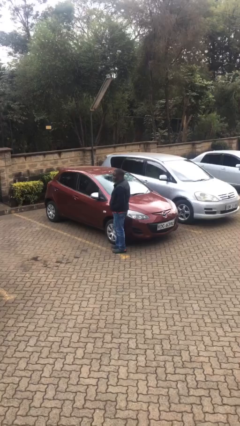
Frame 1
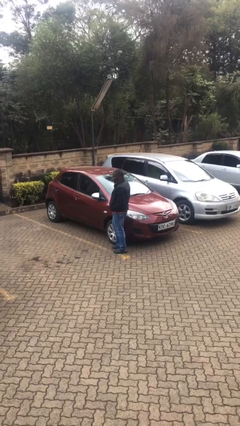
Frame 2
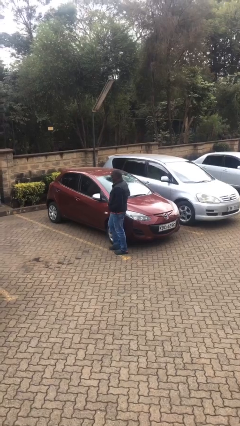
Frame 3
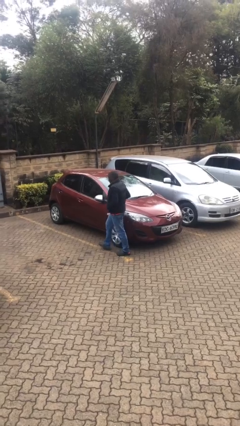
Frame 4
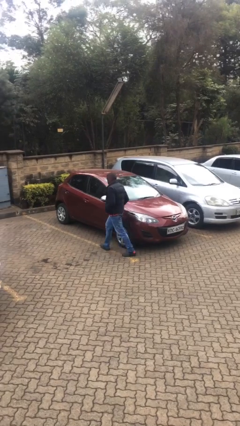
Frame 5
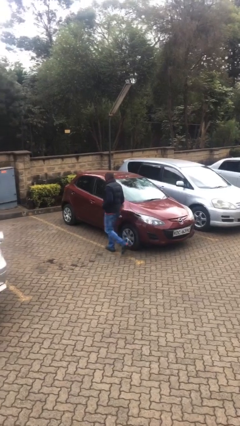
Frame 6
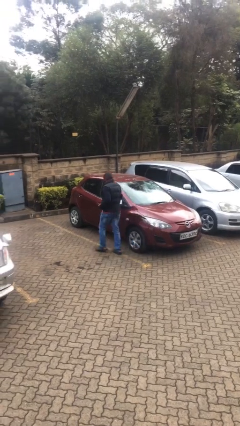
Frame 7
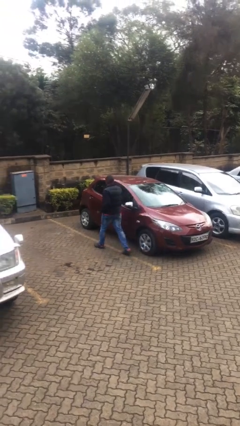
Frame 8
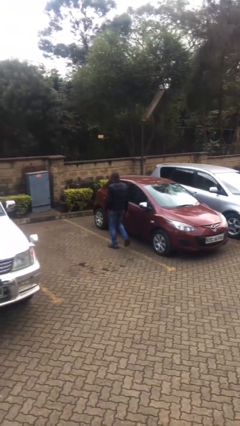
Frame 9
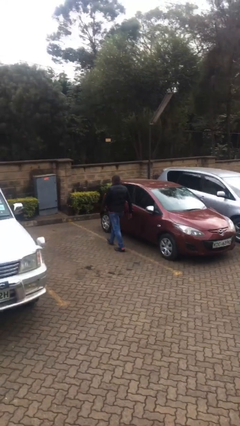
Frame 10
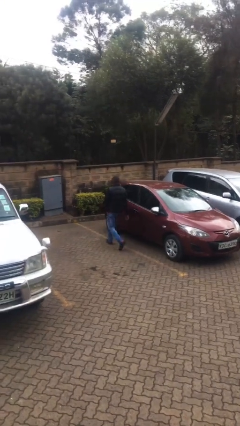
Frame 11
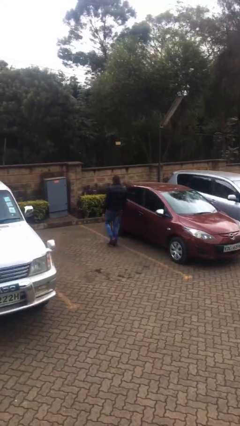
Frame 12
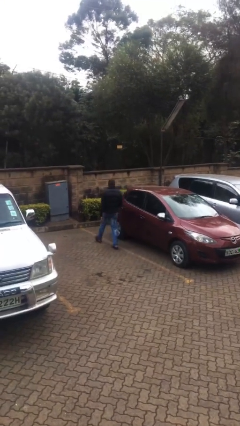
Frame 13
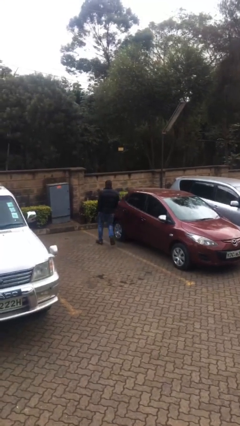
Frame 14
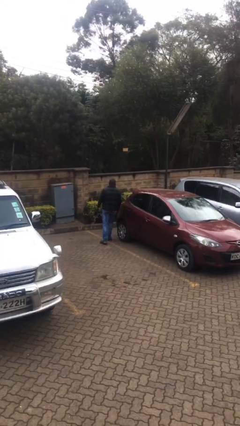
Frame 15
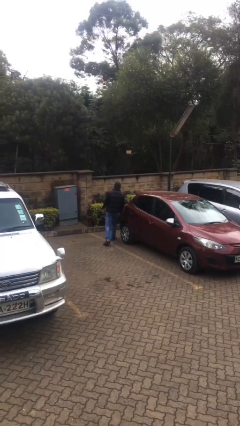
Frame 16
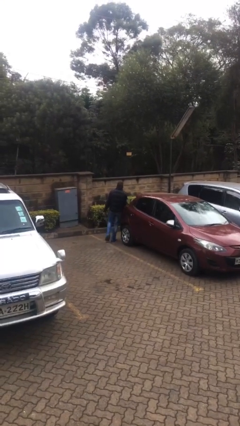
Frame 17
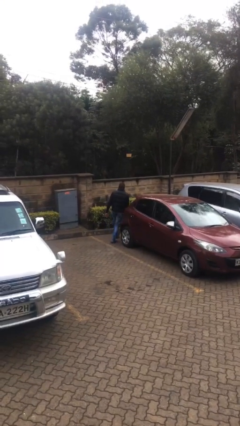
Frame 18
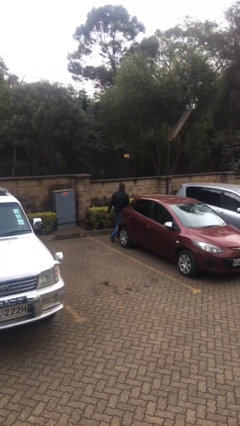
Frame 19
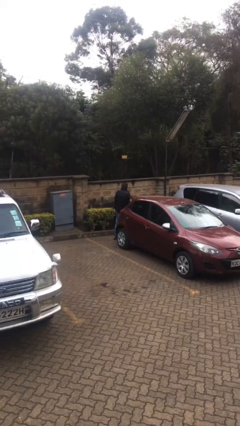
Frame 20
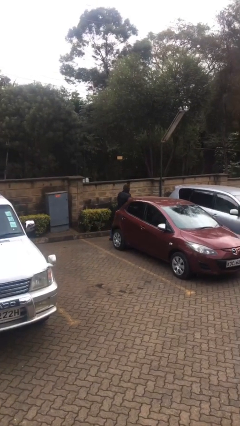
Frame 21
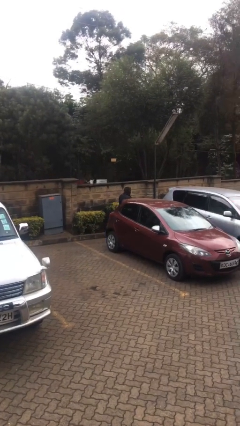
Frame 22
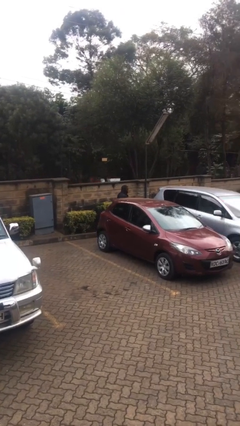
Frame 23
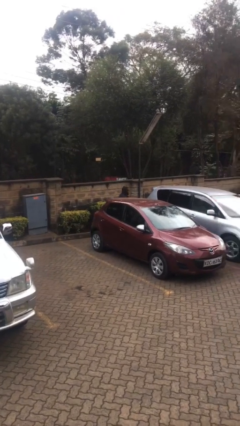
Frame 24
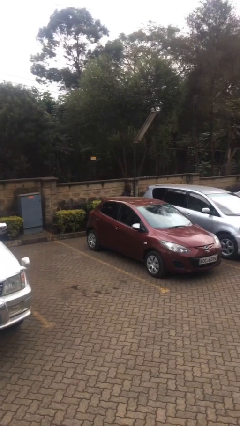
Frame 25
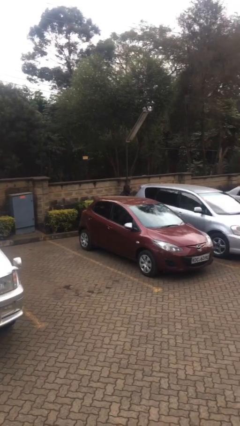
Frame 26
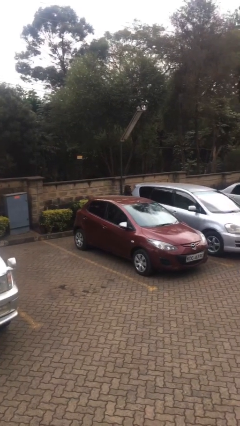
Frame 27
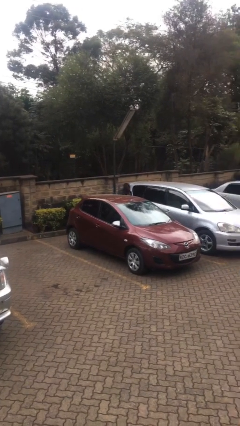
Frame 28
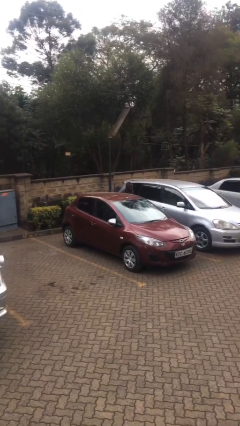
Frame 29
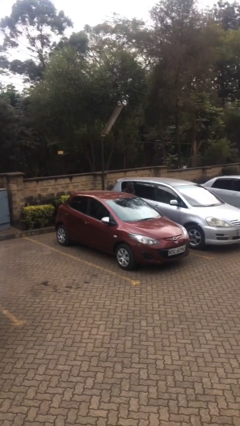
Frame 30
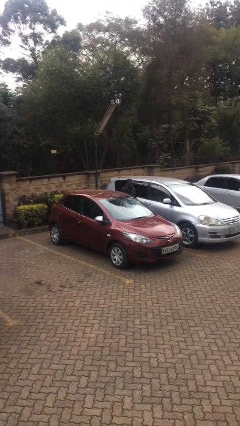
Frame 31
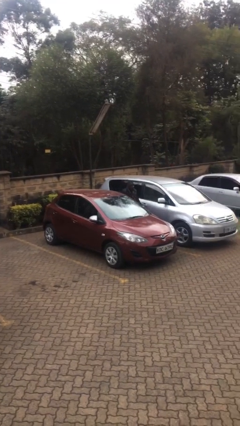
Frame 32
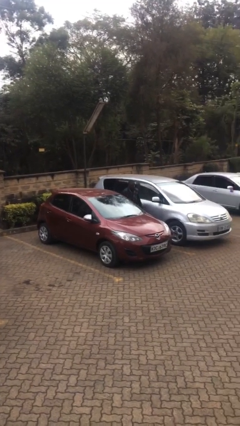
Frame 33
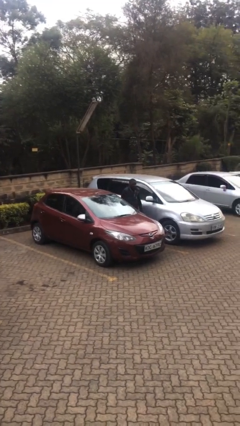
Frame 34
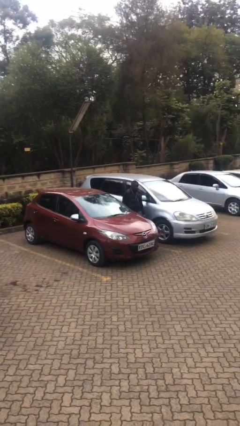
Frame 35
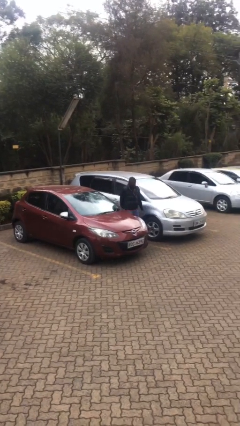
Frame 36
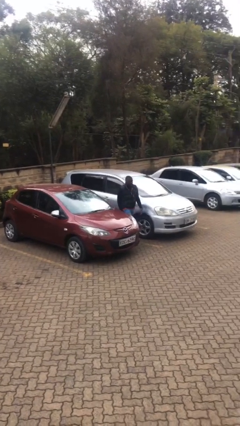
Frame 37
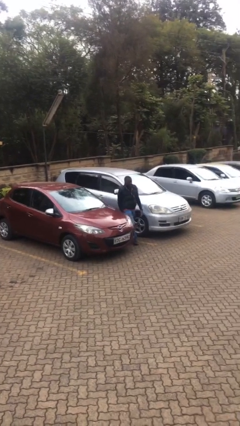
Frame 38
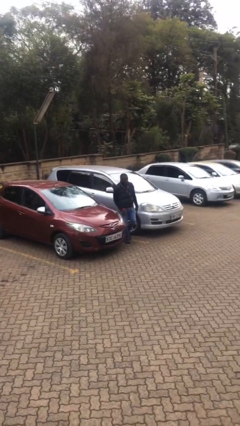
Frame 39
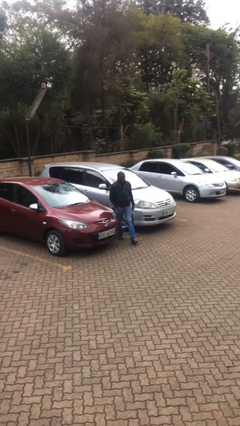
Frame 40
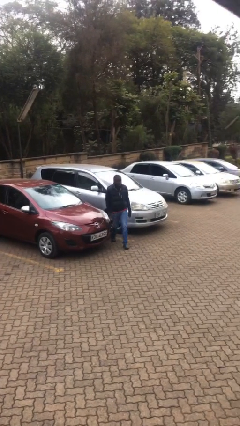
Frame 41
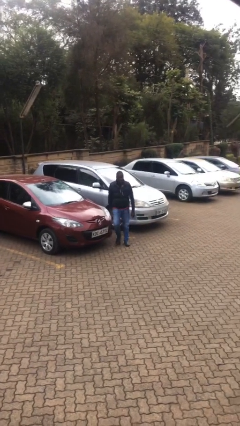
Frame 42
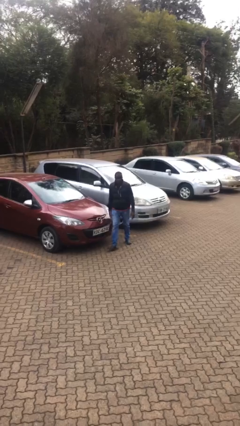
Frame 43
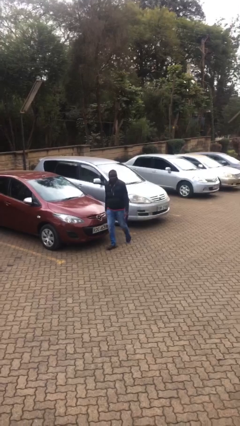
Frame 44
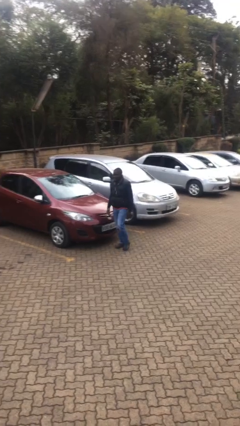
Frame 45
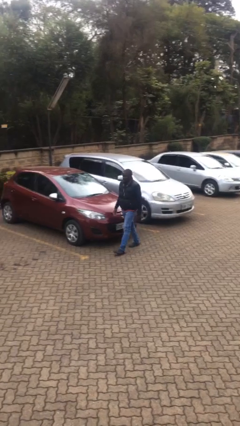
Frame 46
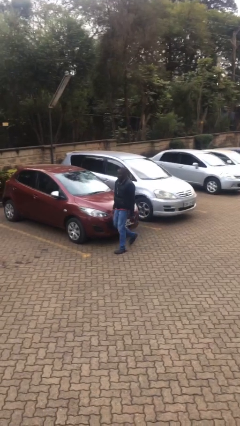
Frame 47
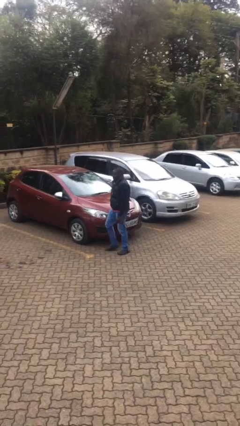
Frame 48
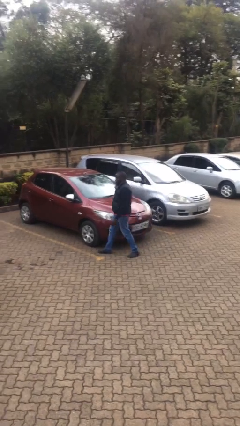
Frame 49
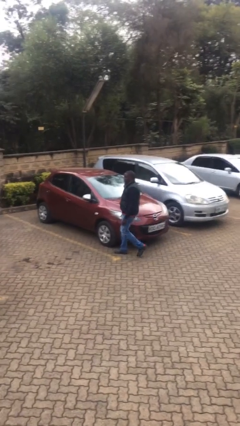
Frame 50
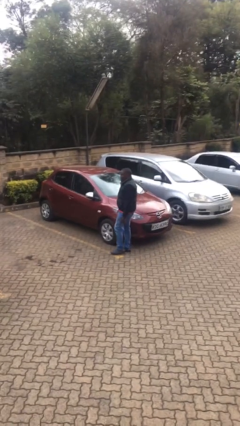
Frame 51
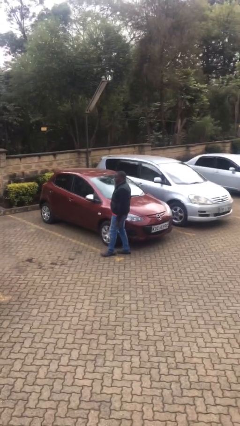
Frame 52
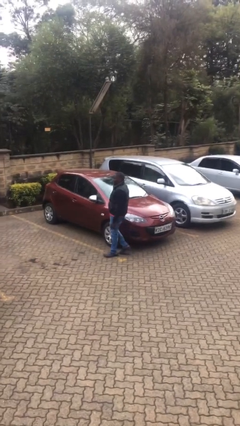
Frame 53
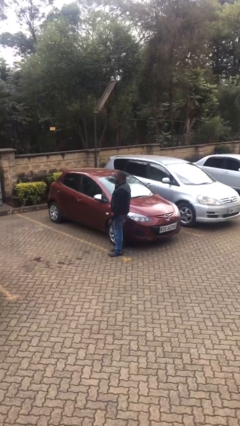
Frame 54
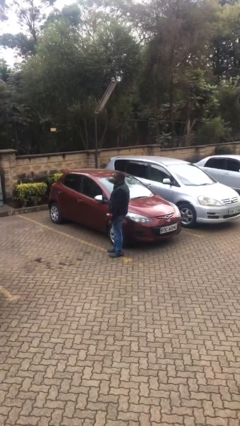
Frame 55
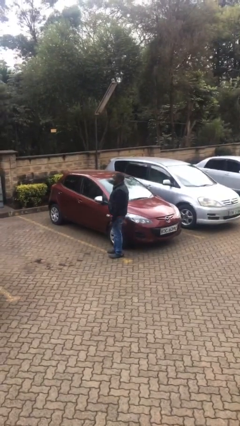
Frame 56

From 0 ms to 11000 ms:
person walks around car

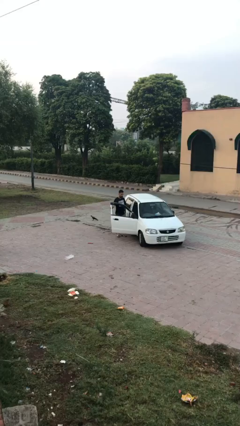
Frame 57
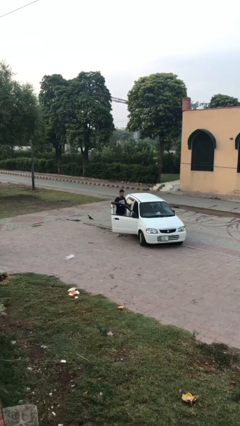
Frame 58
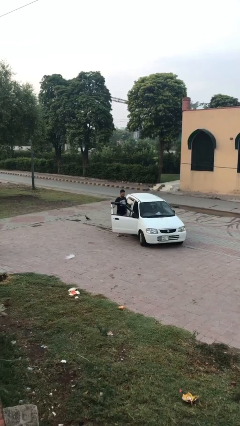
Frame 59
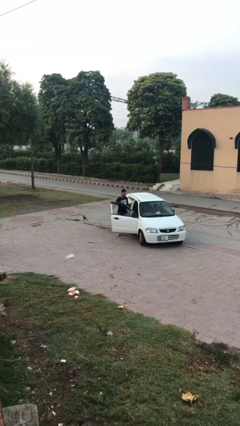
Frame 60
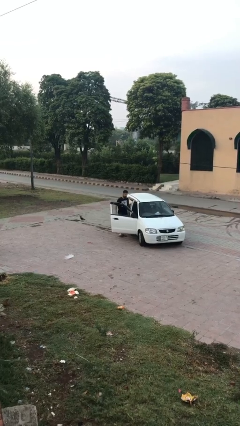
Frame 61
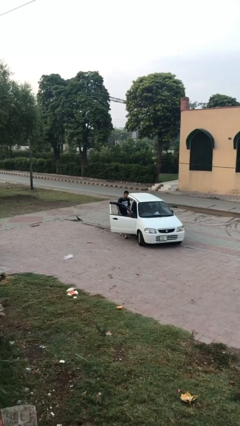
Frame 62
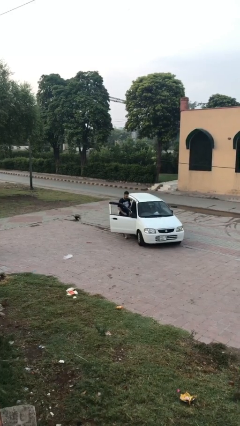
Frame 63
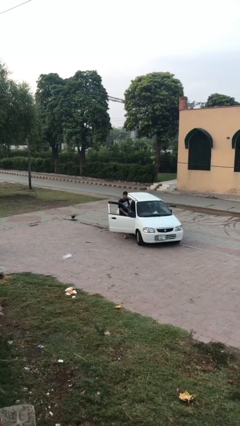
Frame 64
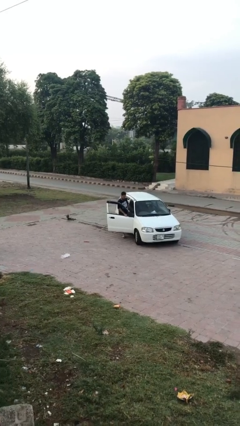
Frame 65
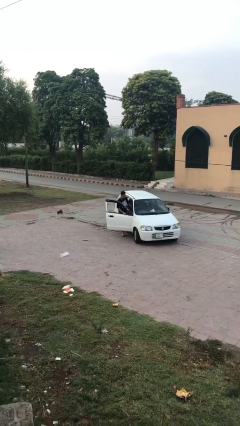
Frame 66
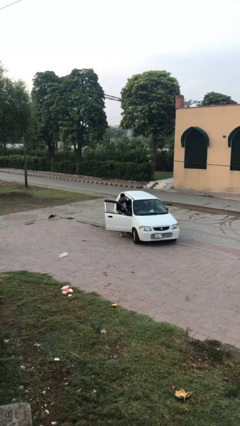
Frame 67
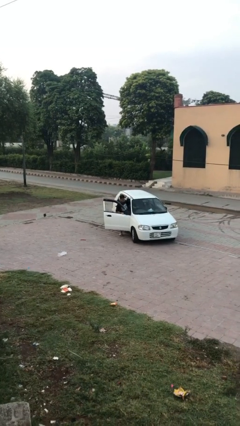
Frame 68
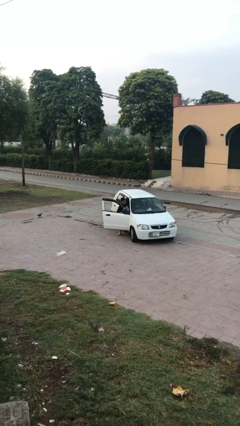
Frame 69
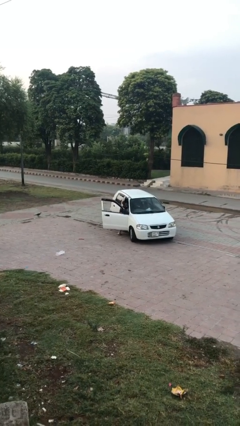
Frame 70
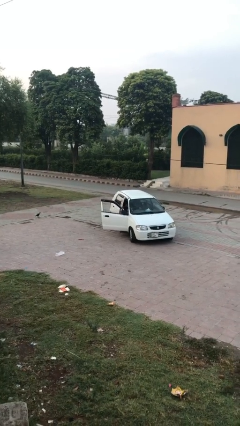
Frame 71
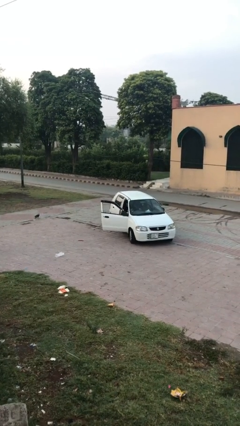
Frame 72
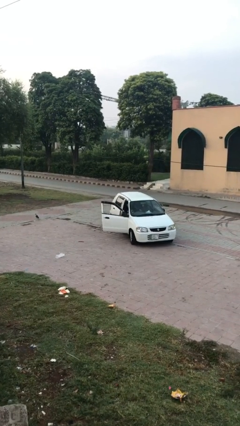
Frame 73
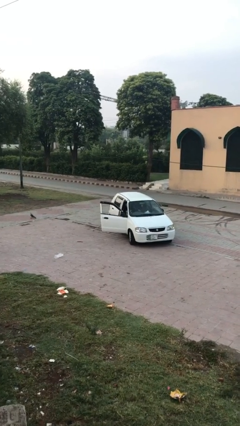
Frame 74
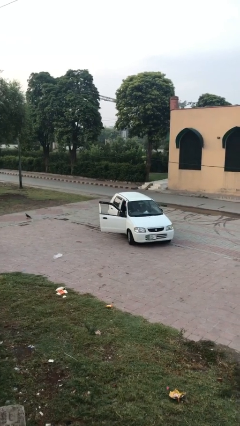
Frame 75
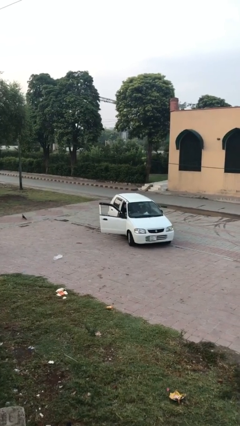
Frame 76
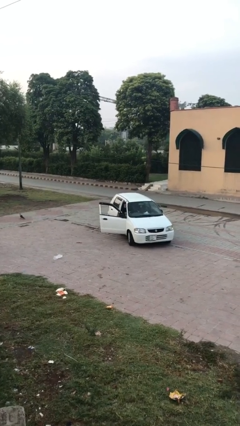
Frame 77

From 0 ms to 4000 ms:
person enters car

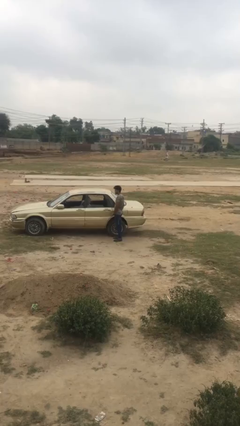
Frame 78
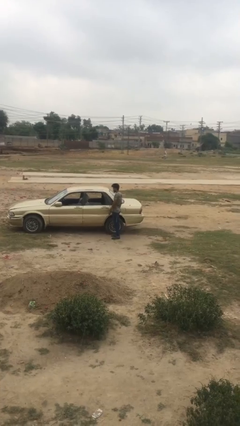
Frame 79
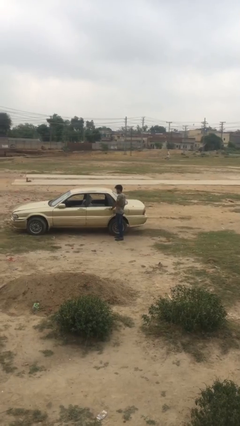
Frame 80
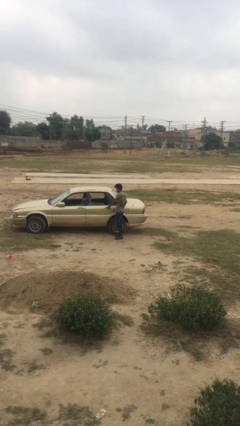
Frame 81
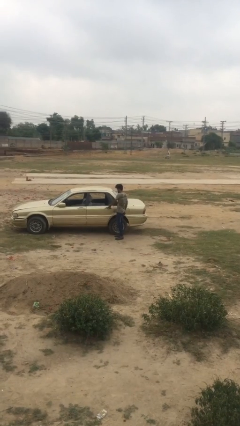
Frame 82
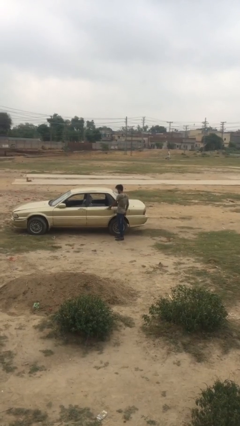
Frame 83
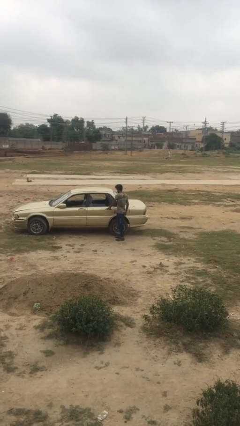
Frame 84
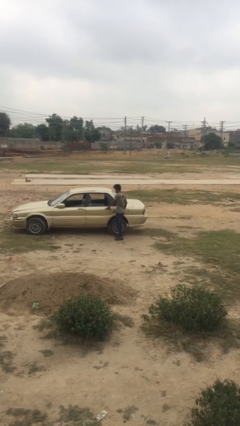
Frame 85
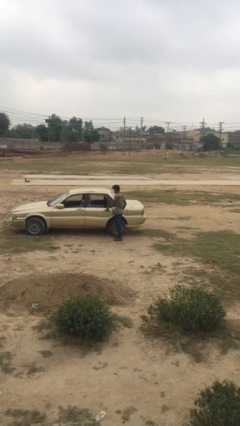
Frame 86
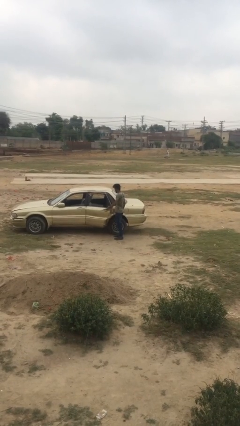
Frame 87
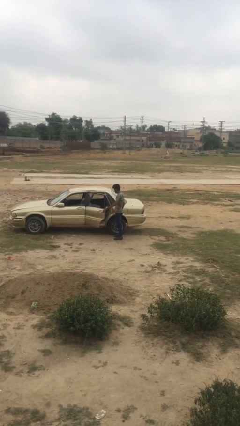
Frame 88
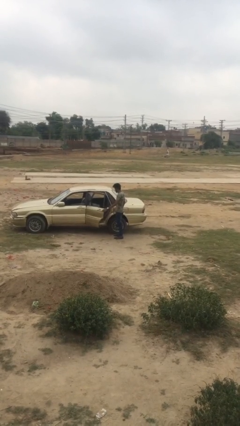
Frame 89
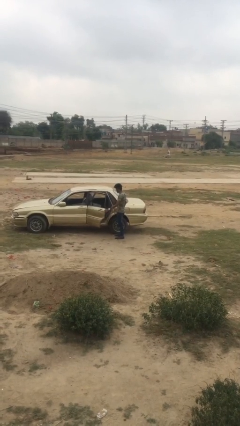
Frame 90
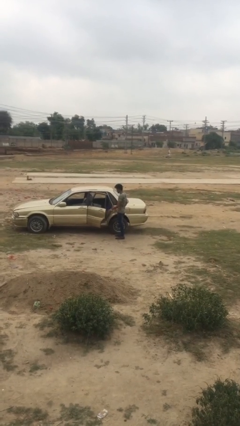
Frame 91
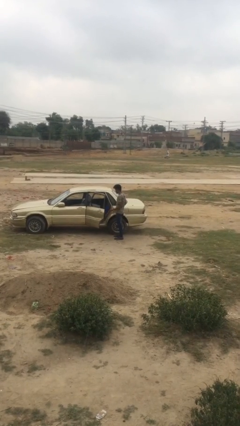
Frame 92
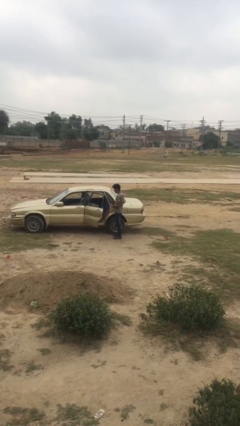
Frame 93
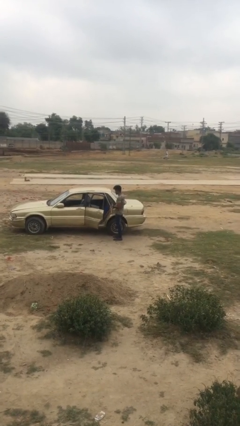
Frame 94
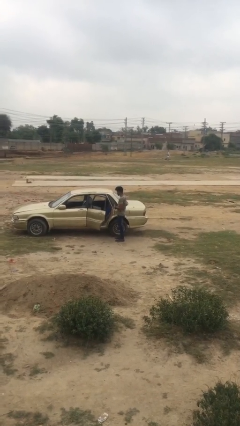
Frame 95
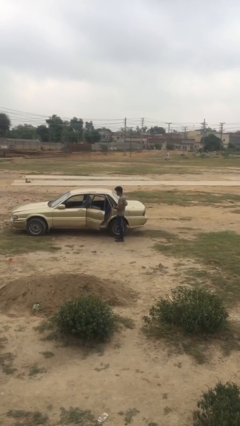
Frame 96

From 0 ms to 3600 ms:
person opens car door
